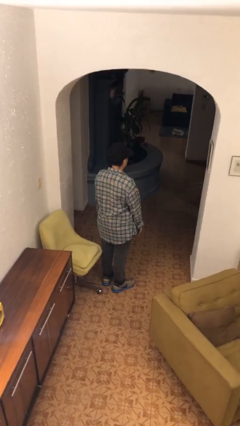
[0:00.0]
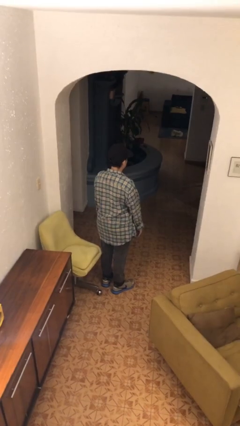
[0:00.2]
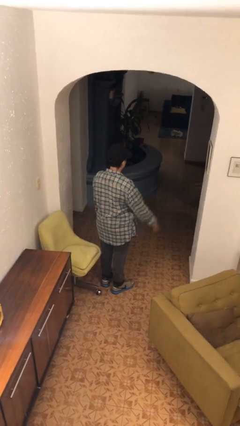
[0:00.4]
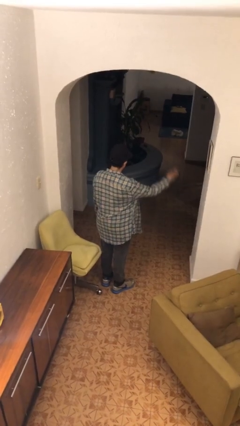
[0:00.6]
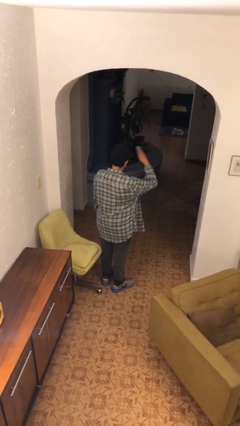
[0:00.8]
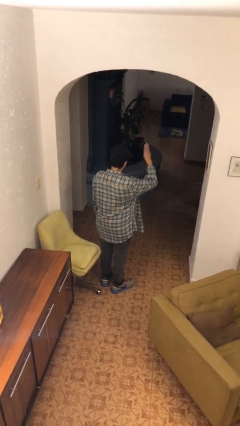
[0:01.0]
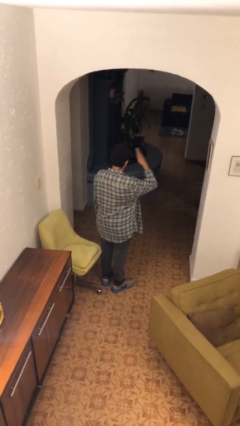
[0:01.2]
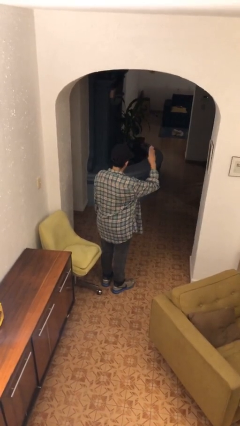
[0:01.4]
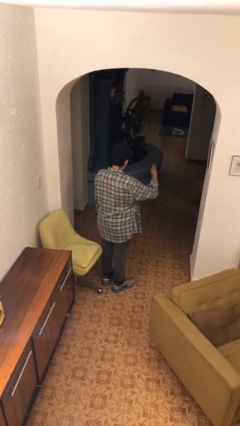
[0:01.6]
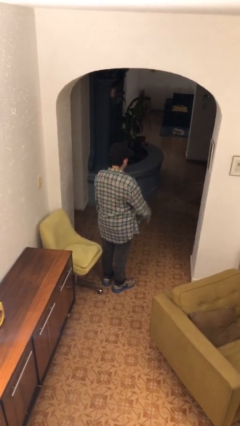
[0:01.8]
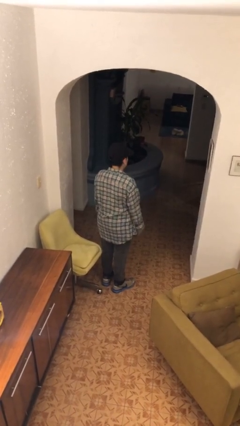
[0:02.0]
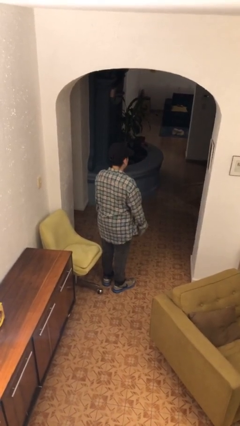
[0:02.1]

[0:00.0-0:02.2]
person salutes

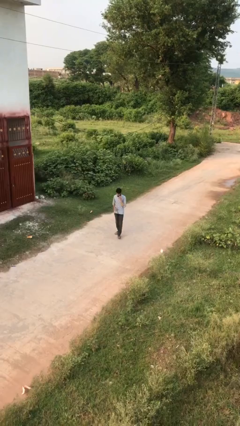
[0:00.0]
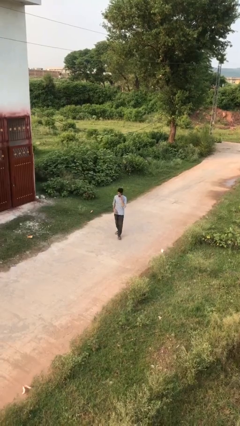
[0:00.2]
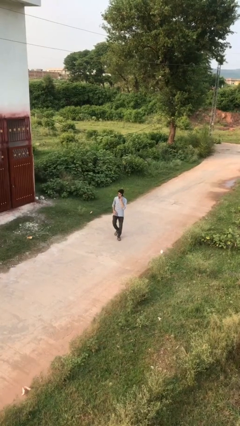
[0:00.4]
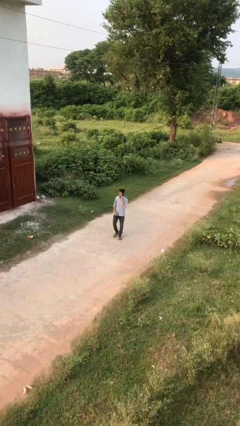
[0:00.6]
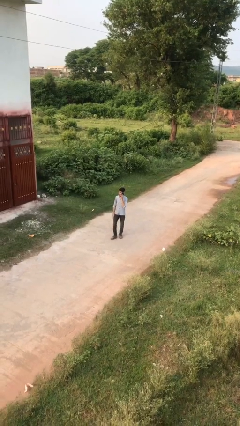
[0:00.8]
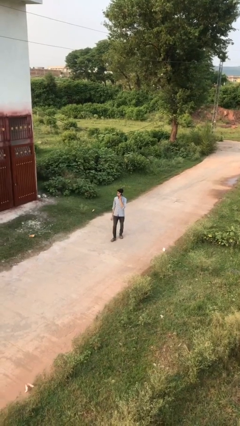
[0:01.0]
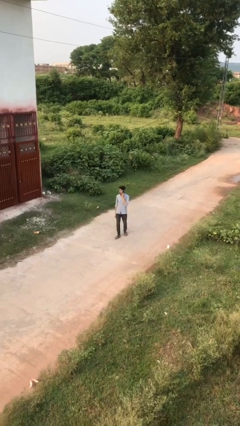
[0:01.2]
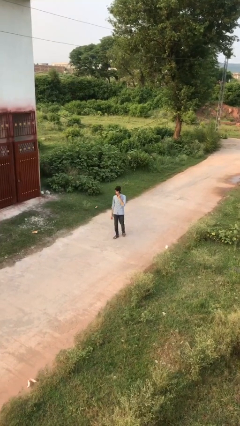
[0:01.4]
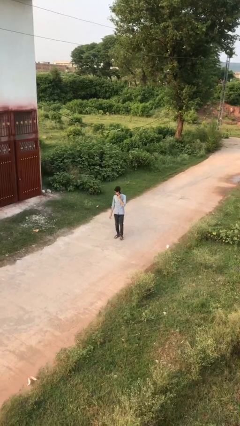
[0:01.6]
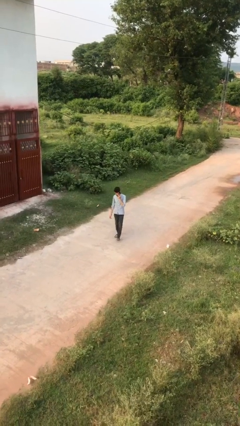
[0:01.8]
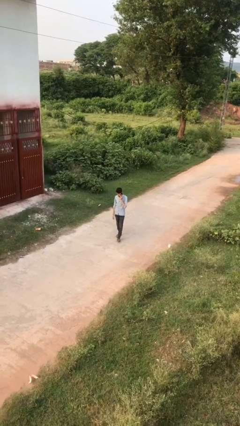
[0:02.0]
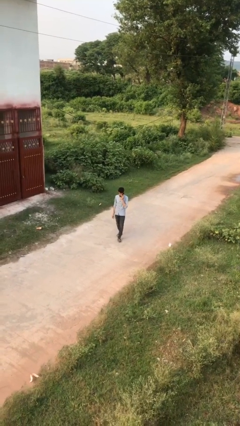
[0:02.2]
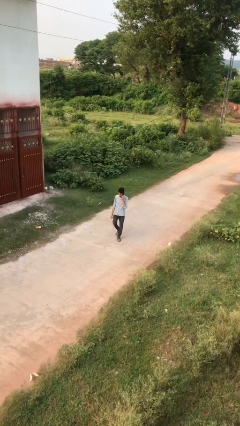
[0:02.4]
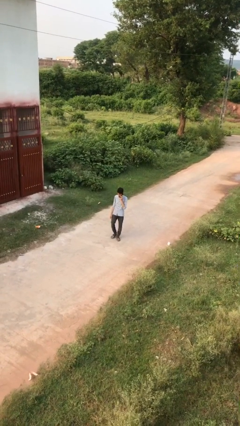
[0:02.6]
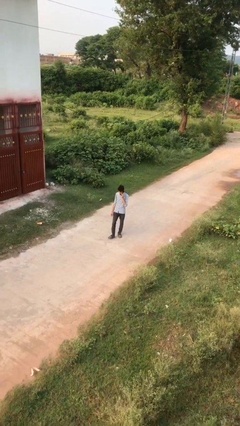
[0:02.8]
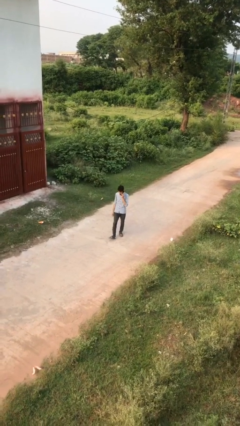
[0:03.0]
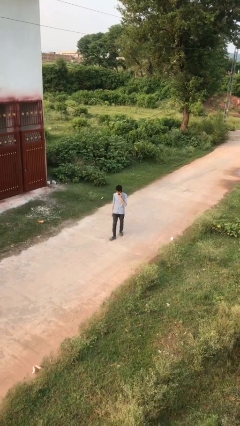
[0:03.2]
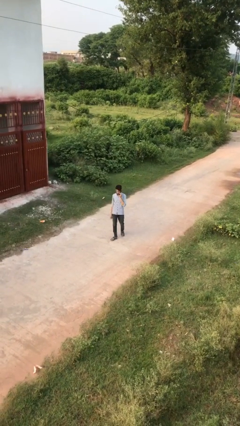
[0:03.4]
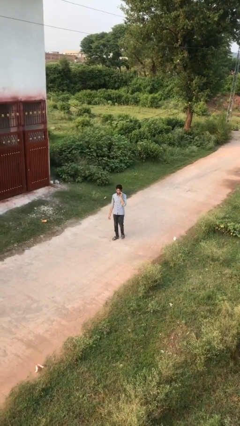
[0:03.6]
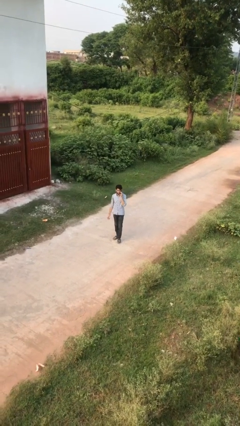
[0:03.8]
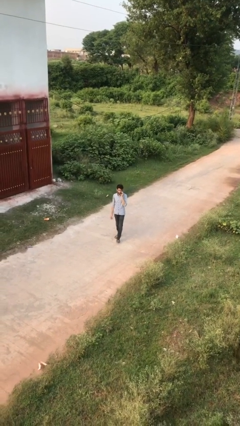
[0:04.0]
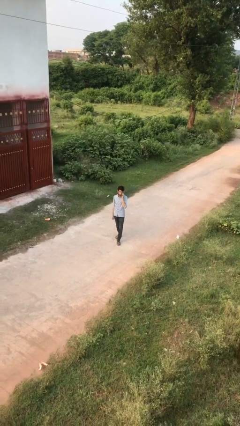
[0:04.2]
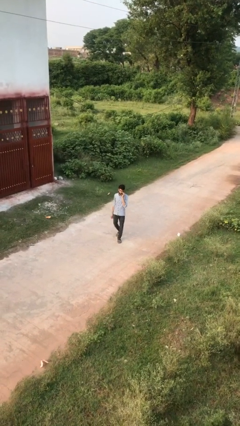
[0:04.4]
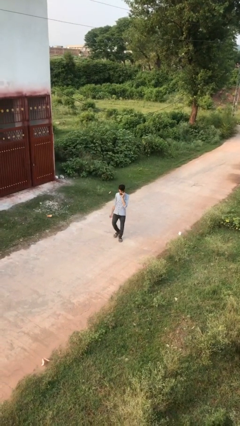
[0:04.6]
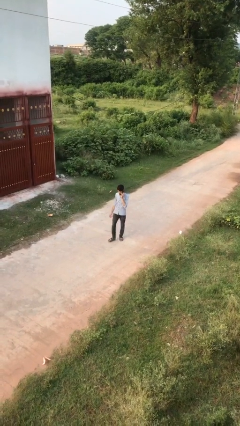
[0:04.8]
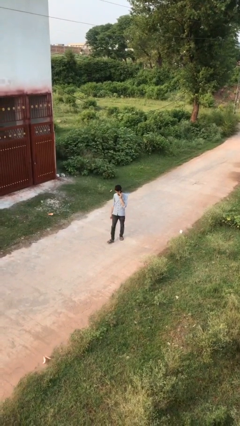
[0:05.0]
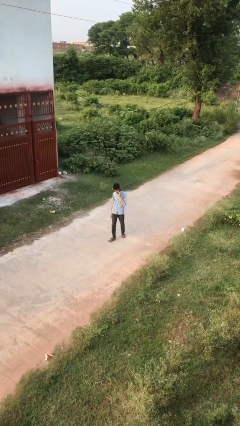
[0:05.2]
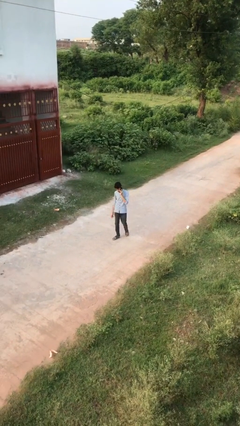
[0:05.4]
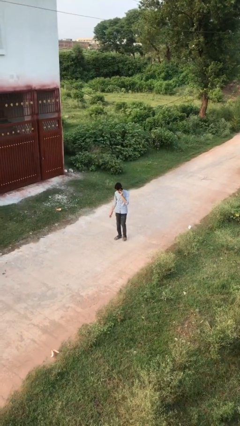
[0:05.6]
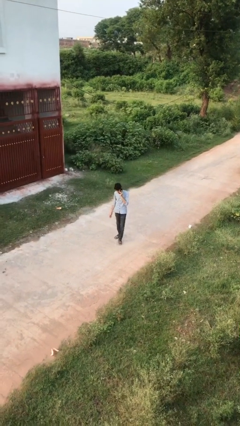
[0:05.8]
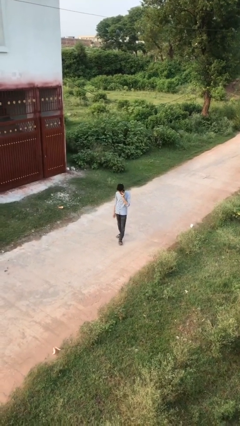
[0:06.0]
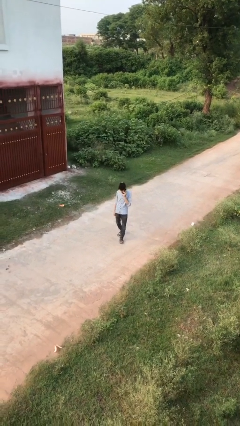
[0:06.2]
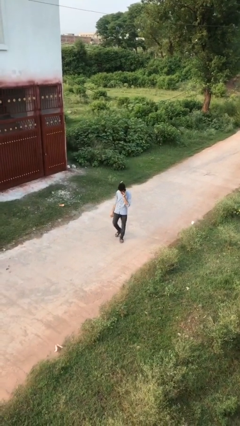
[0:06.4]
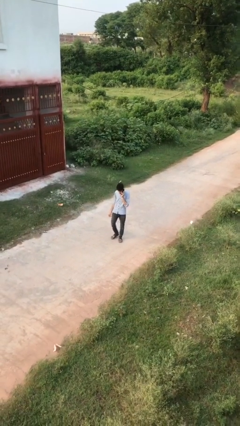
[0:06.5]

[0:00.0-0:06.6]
person talks on phone

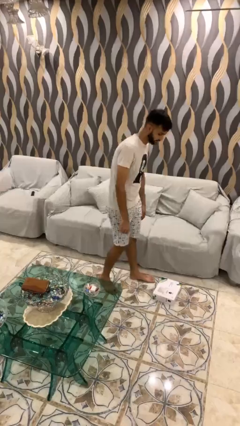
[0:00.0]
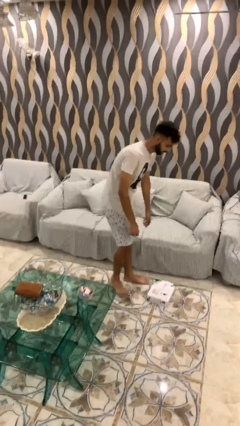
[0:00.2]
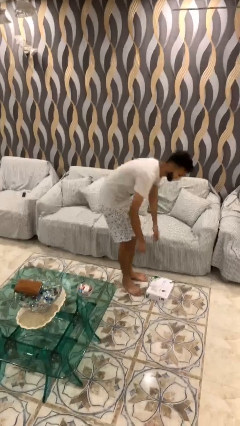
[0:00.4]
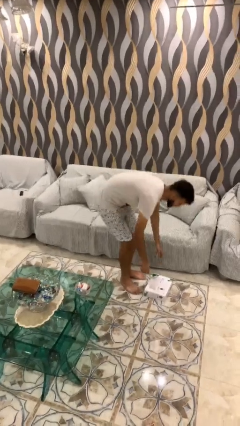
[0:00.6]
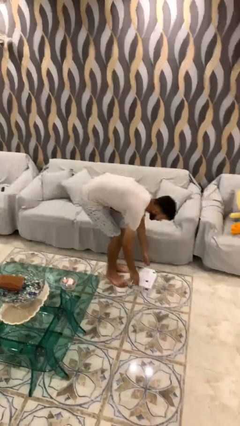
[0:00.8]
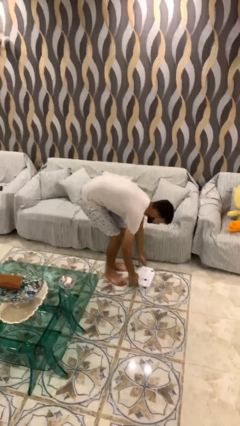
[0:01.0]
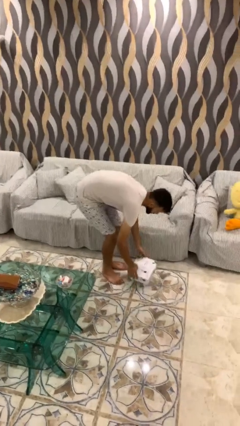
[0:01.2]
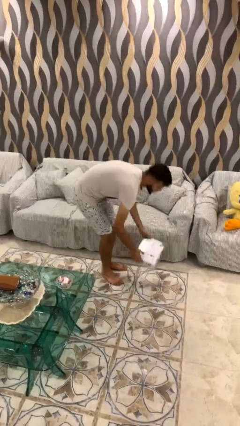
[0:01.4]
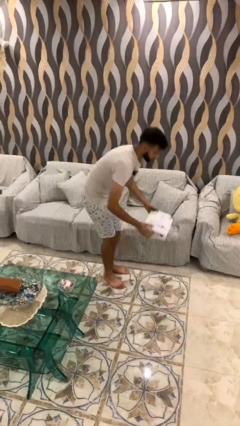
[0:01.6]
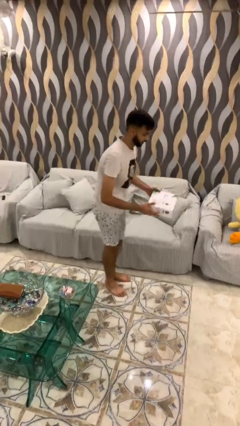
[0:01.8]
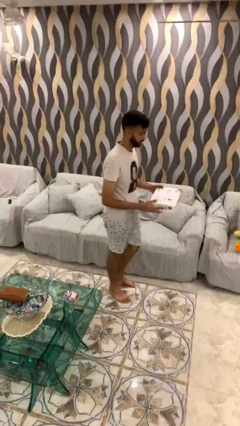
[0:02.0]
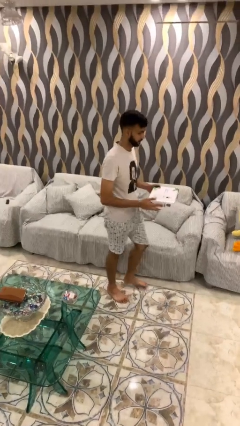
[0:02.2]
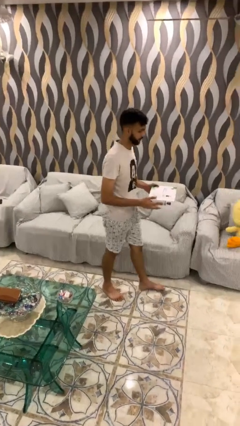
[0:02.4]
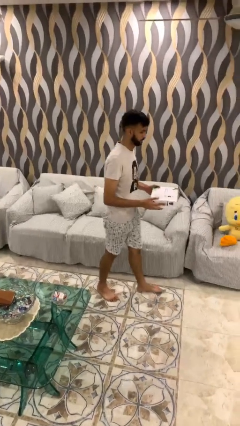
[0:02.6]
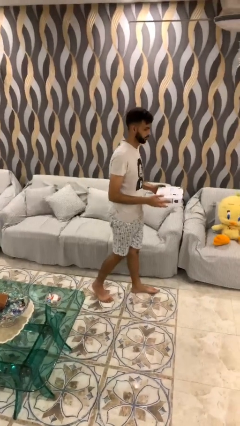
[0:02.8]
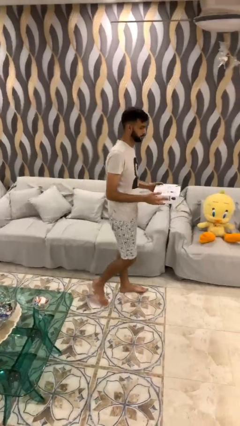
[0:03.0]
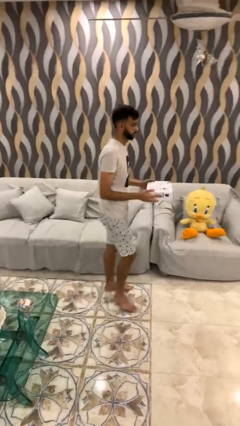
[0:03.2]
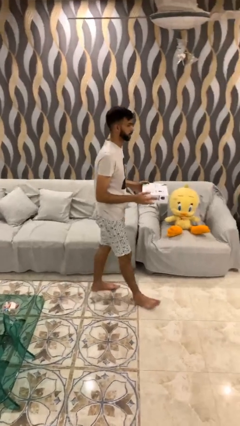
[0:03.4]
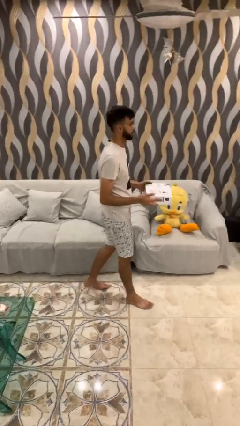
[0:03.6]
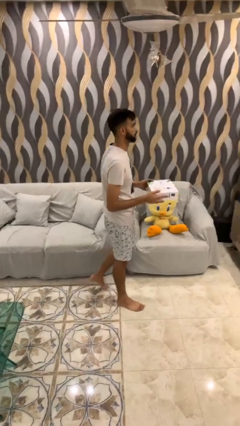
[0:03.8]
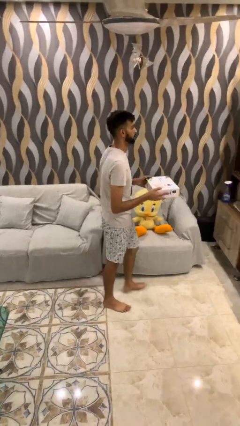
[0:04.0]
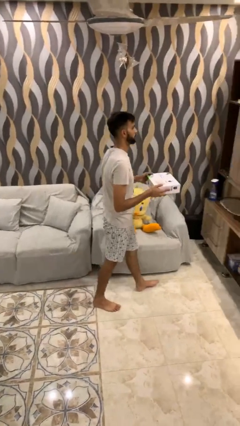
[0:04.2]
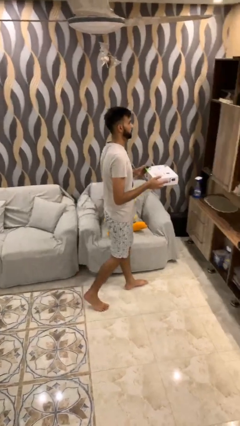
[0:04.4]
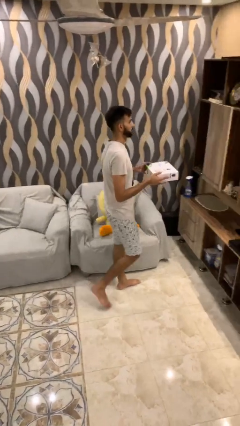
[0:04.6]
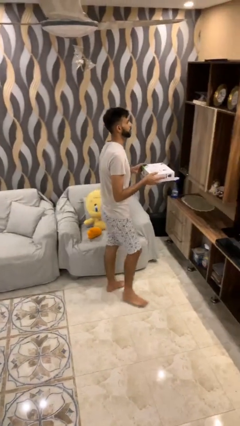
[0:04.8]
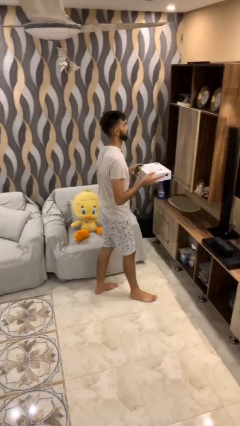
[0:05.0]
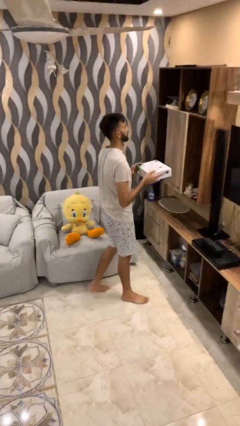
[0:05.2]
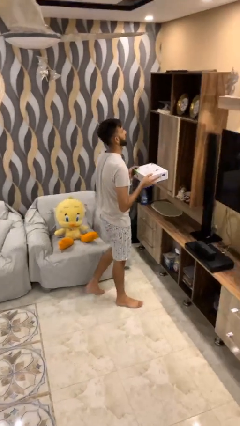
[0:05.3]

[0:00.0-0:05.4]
person picks up object from floor

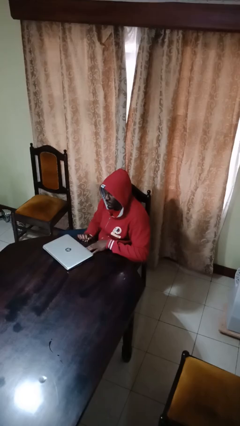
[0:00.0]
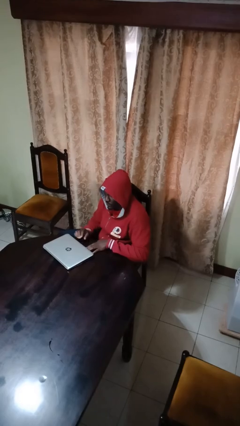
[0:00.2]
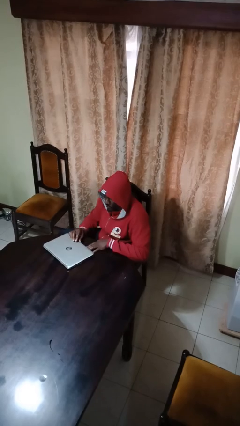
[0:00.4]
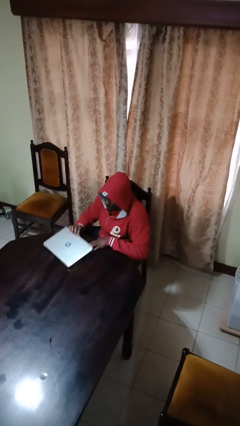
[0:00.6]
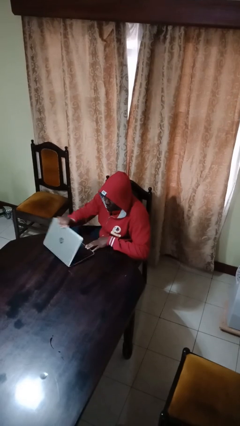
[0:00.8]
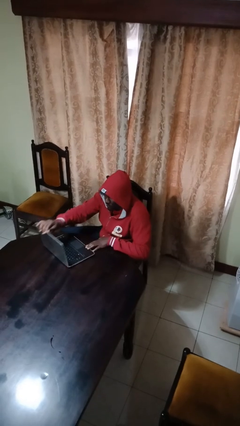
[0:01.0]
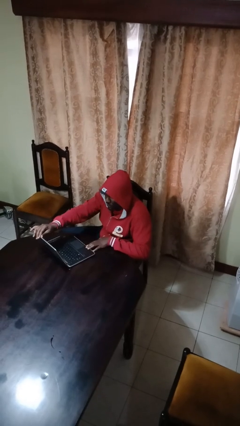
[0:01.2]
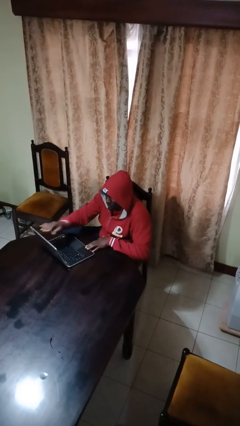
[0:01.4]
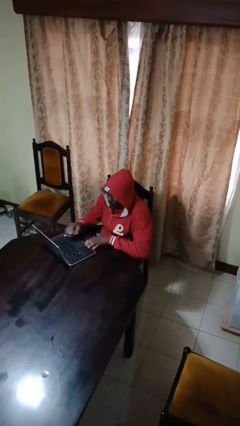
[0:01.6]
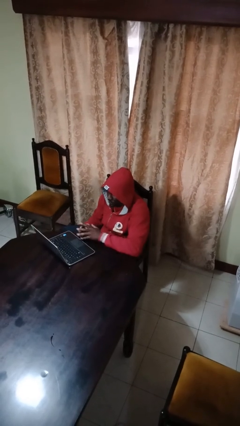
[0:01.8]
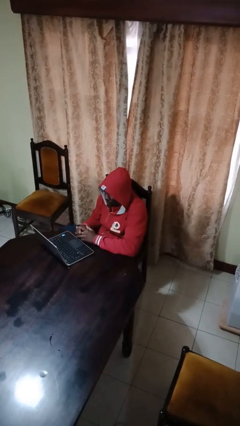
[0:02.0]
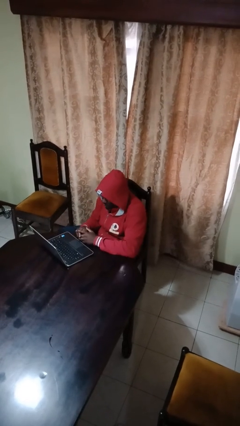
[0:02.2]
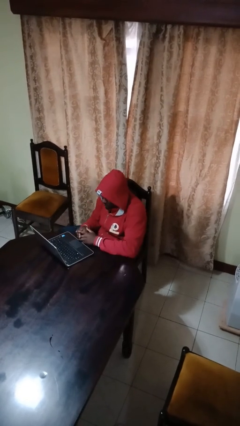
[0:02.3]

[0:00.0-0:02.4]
person opens laptop

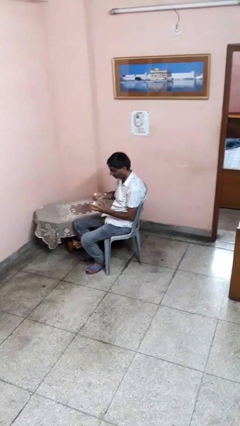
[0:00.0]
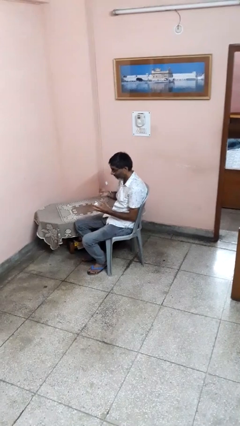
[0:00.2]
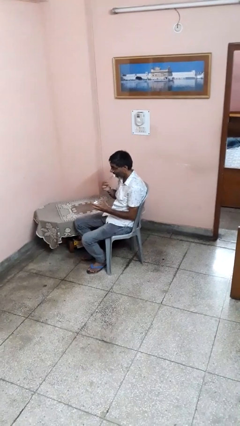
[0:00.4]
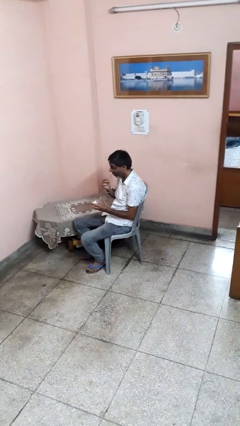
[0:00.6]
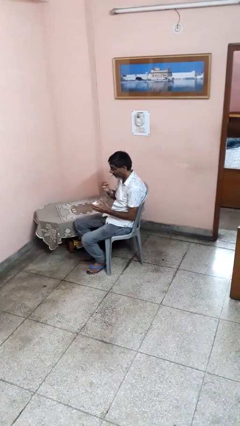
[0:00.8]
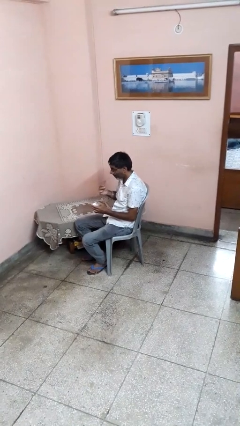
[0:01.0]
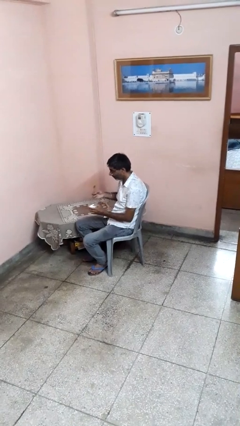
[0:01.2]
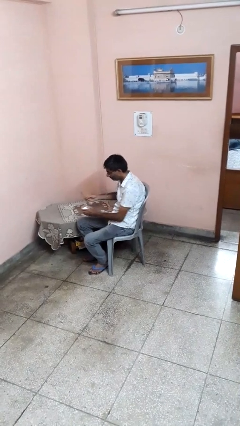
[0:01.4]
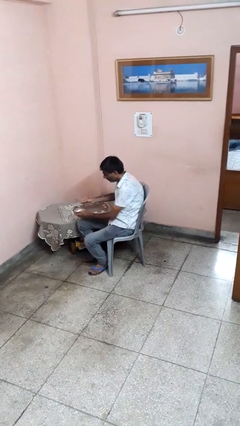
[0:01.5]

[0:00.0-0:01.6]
person eats with utensil
